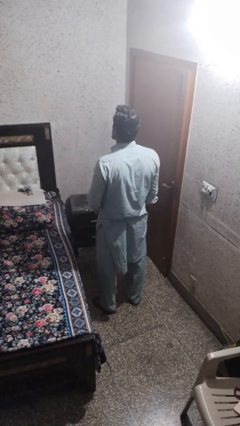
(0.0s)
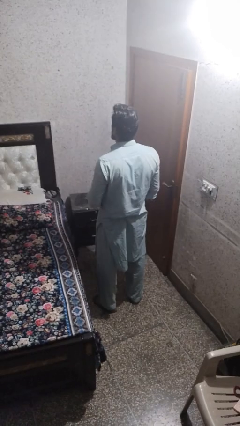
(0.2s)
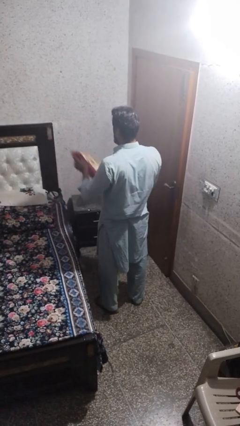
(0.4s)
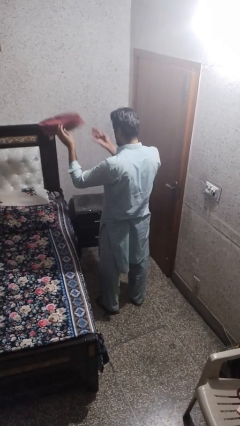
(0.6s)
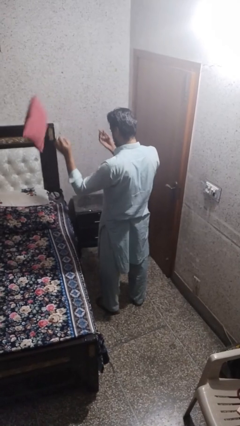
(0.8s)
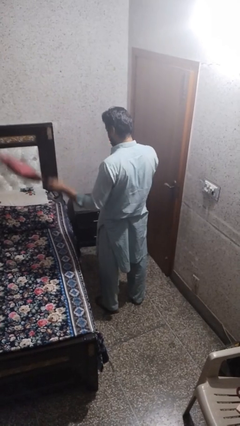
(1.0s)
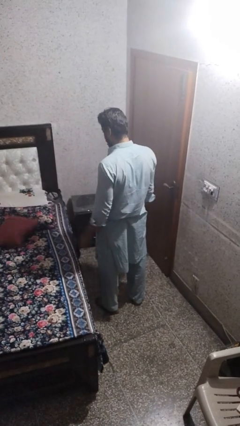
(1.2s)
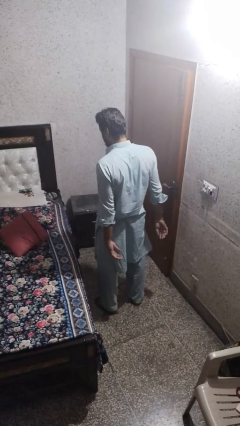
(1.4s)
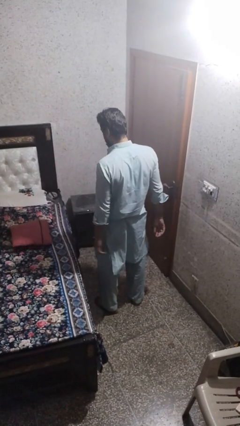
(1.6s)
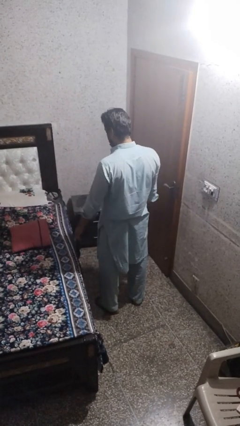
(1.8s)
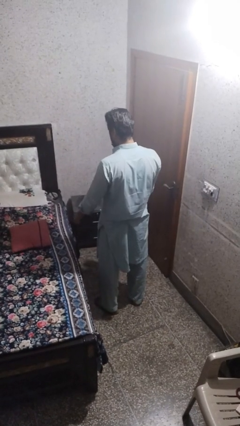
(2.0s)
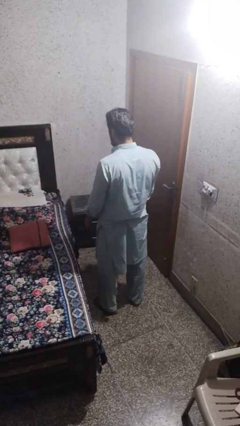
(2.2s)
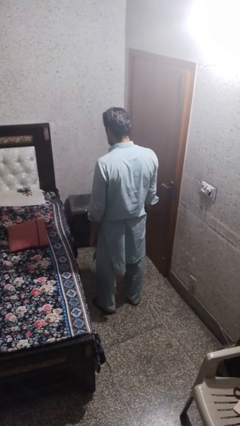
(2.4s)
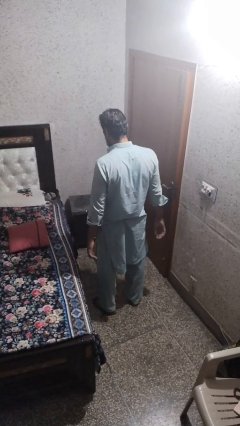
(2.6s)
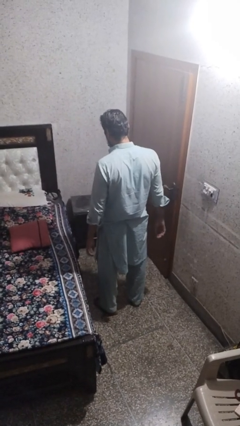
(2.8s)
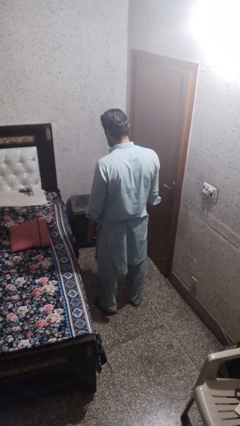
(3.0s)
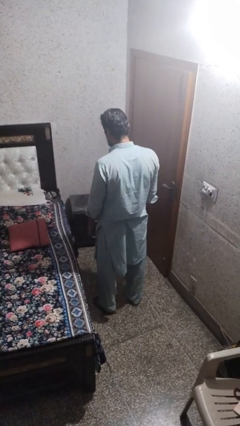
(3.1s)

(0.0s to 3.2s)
person throws object on bed

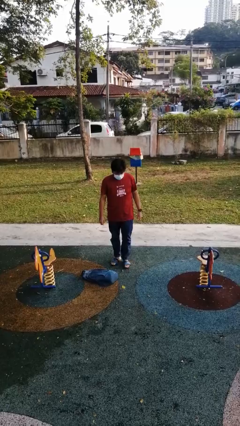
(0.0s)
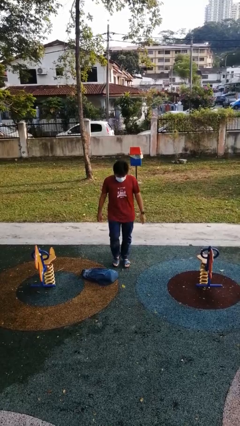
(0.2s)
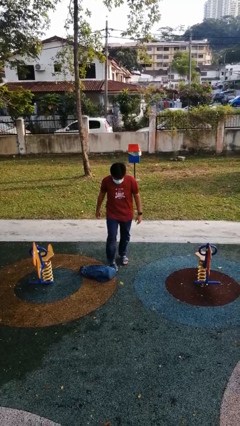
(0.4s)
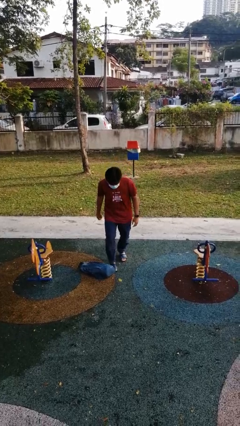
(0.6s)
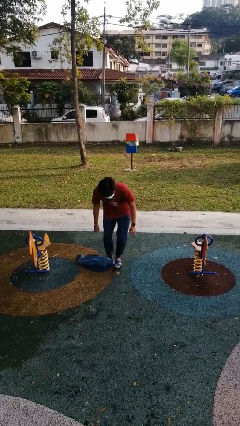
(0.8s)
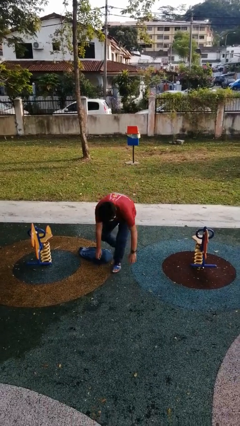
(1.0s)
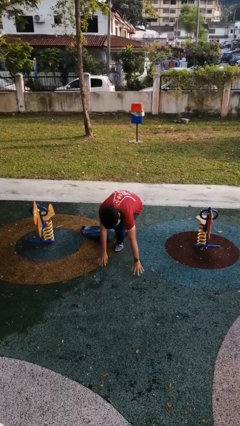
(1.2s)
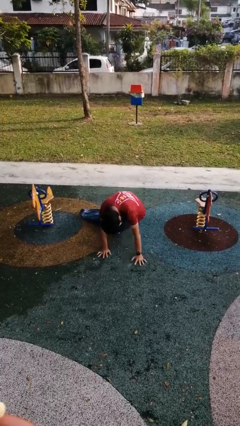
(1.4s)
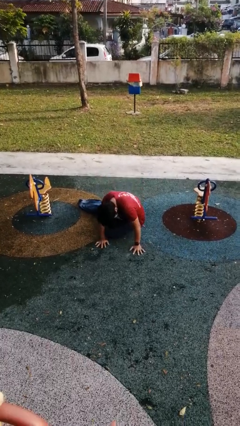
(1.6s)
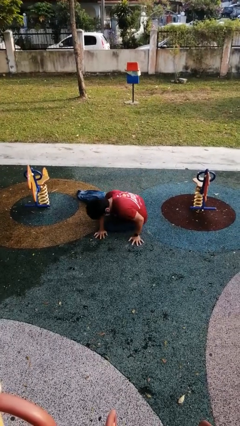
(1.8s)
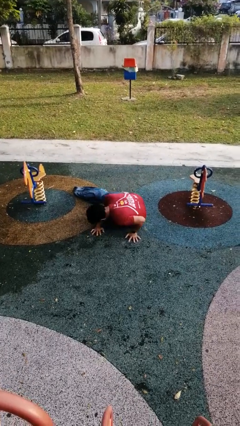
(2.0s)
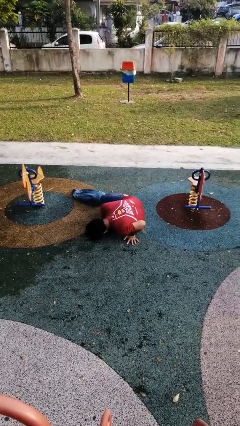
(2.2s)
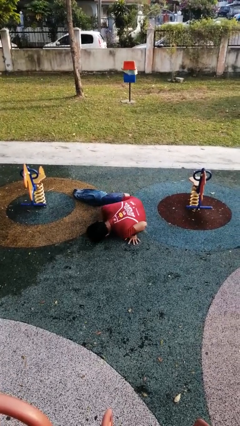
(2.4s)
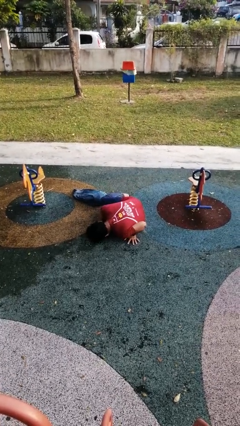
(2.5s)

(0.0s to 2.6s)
person trips on object on floor

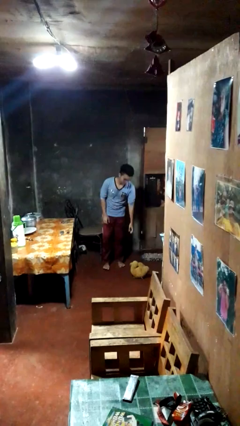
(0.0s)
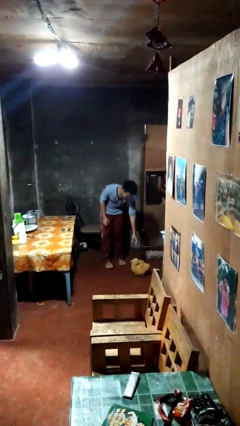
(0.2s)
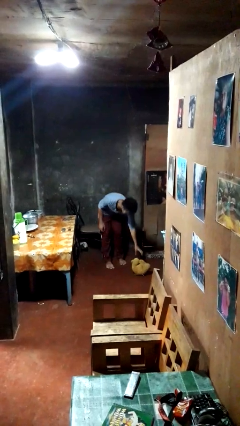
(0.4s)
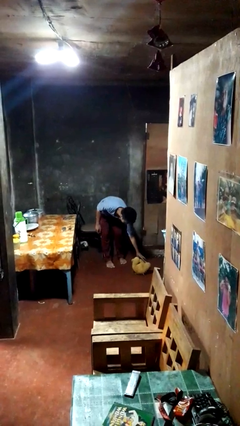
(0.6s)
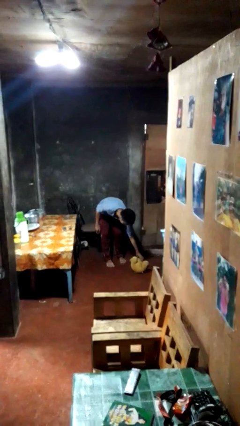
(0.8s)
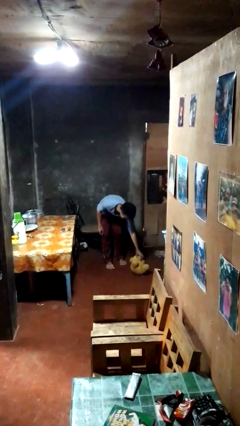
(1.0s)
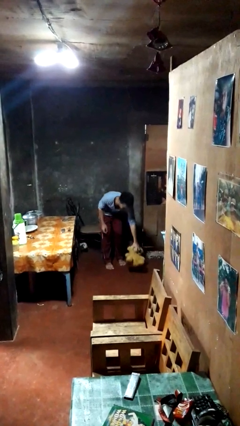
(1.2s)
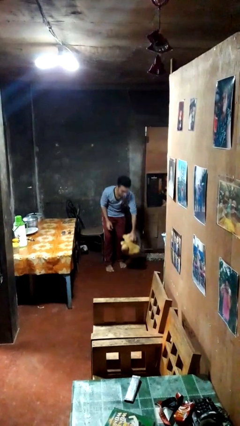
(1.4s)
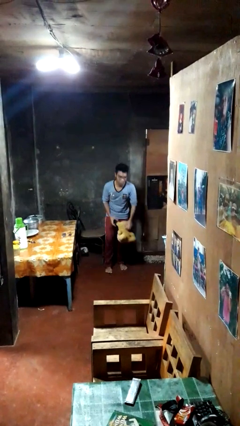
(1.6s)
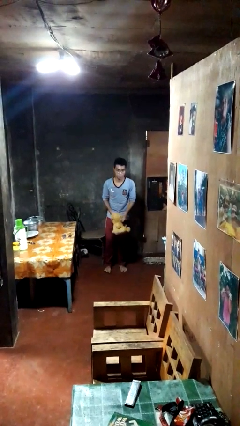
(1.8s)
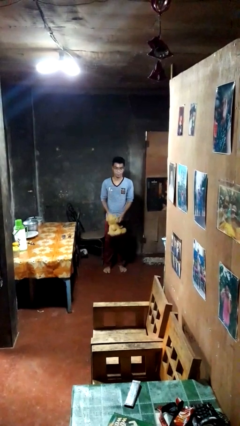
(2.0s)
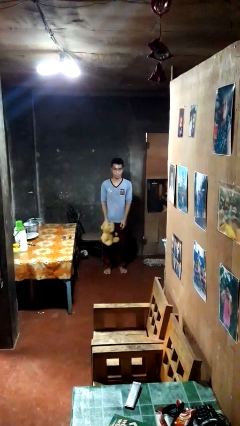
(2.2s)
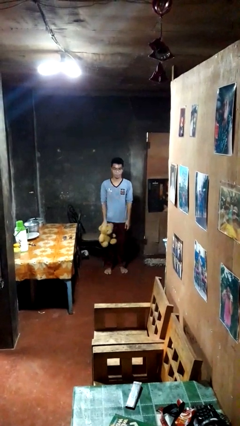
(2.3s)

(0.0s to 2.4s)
person picks up object from floor

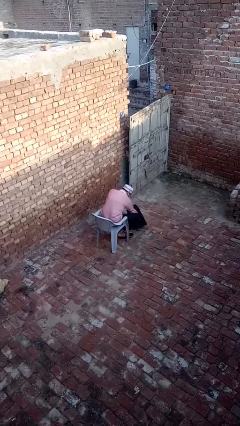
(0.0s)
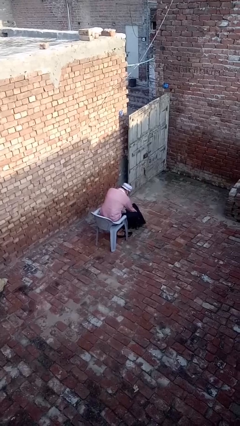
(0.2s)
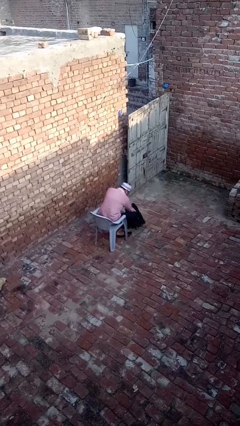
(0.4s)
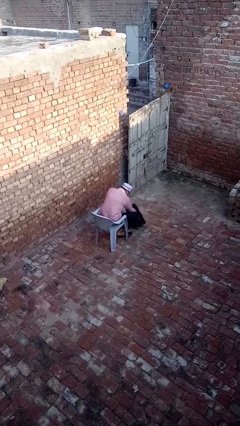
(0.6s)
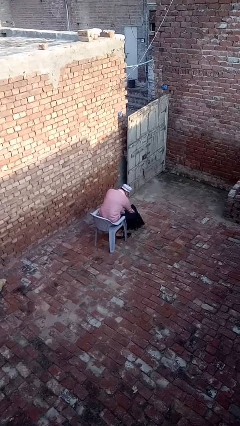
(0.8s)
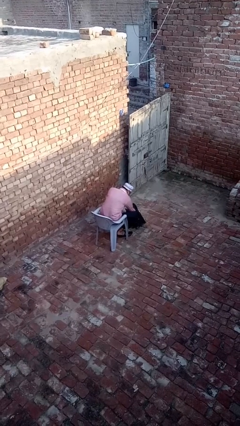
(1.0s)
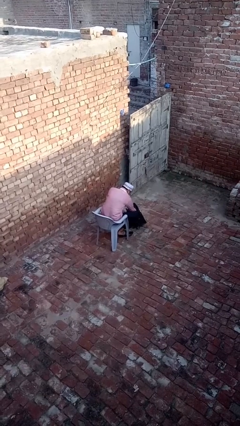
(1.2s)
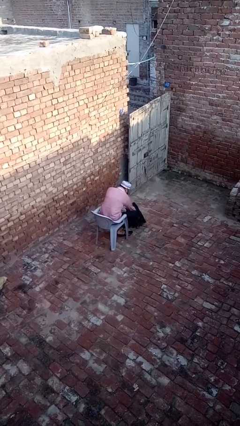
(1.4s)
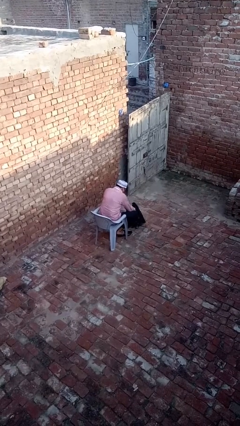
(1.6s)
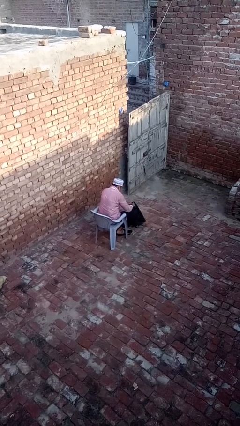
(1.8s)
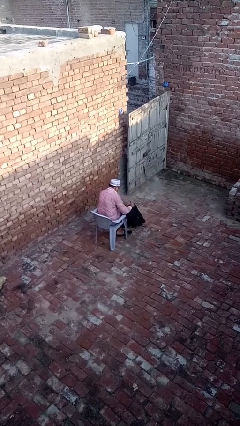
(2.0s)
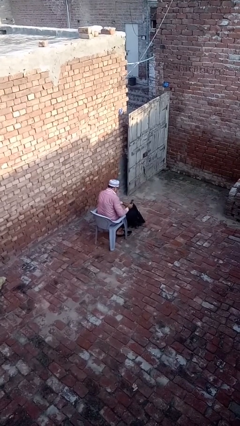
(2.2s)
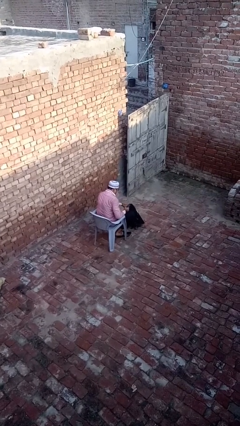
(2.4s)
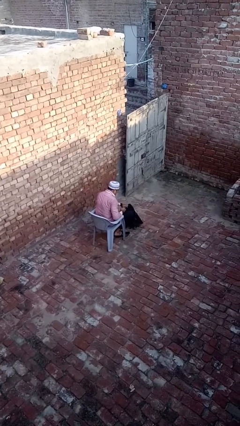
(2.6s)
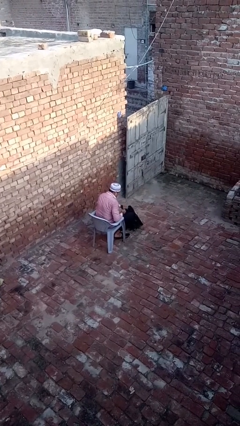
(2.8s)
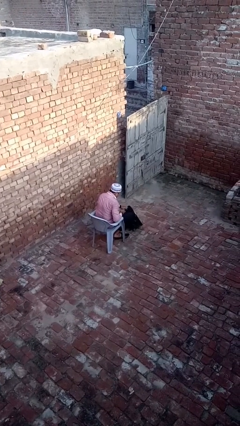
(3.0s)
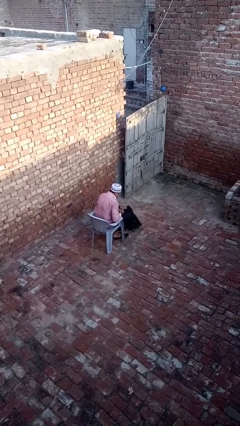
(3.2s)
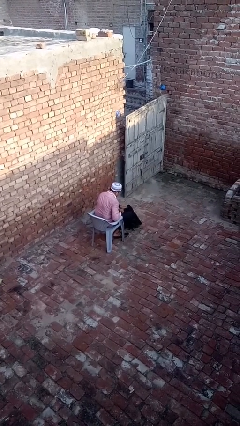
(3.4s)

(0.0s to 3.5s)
person takes object from backpack

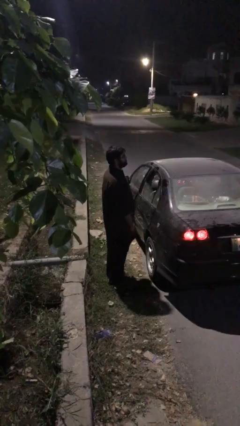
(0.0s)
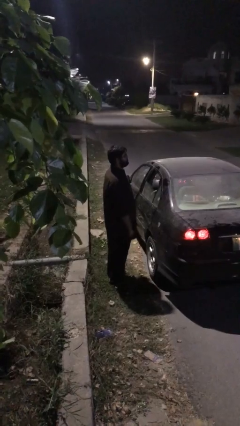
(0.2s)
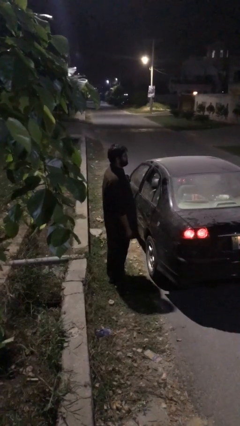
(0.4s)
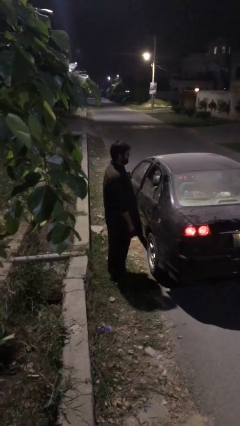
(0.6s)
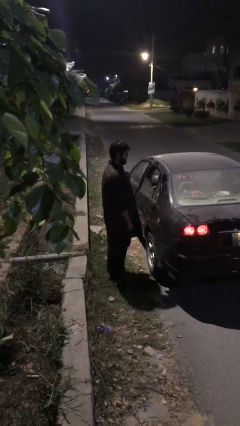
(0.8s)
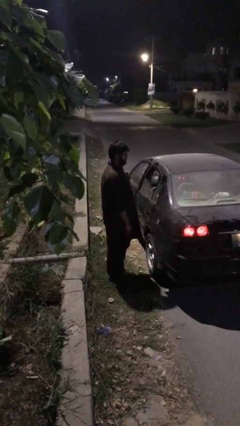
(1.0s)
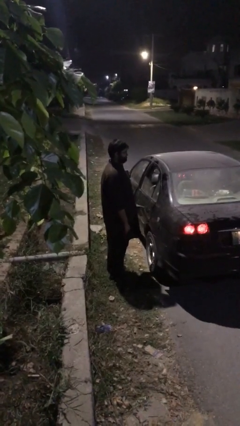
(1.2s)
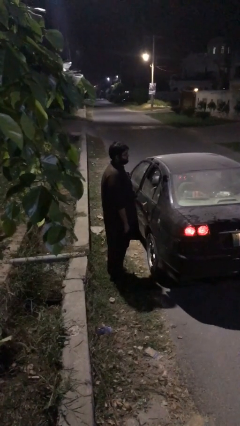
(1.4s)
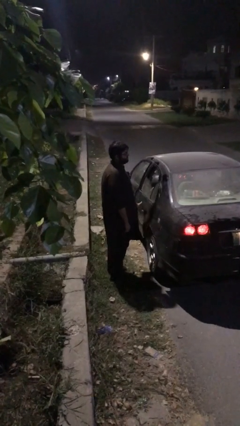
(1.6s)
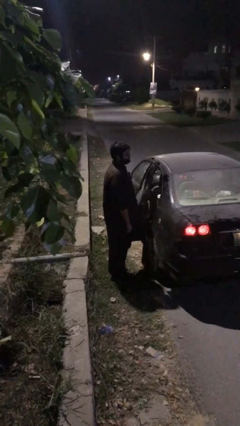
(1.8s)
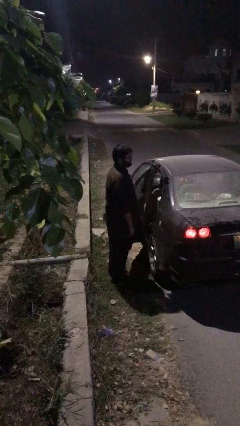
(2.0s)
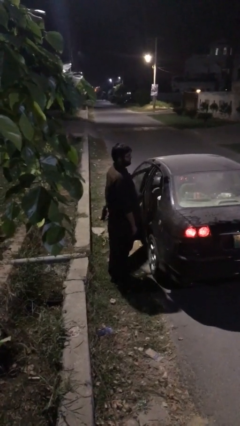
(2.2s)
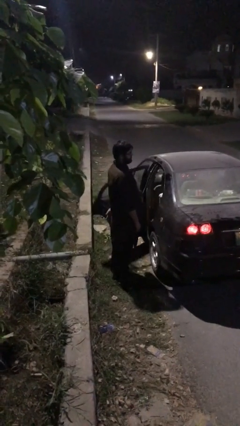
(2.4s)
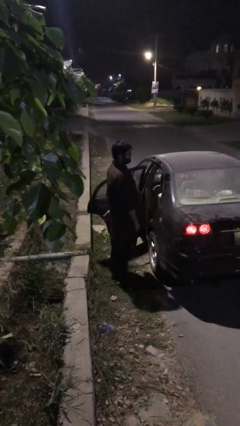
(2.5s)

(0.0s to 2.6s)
person opens car door

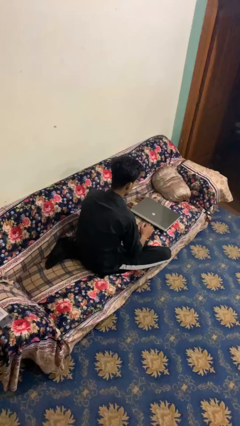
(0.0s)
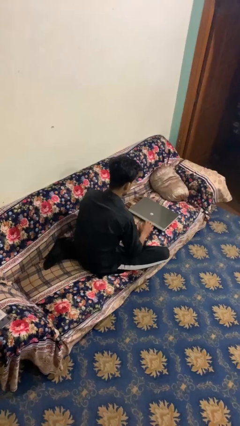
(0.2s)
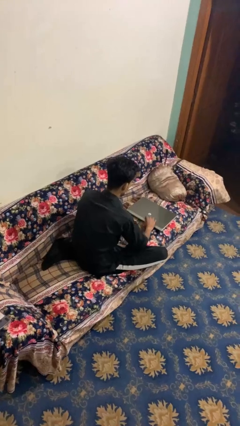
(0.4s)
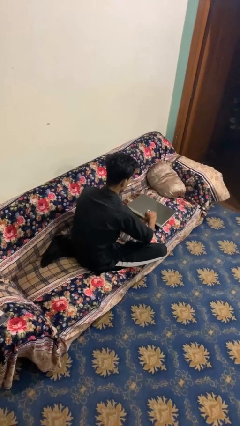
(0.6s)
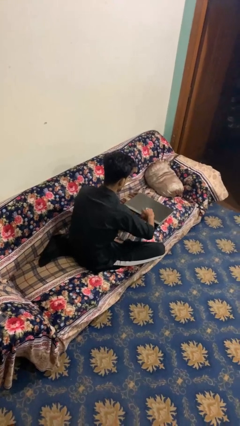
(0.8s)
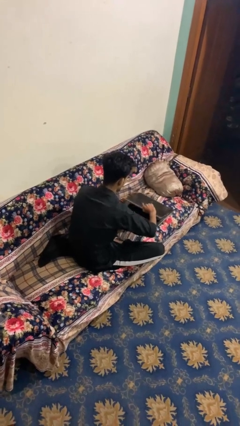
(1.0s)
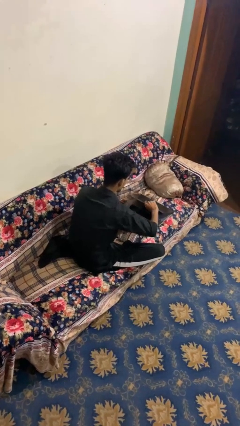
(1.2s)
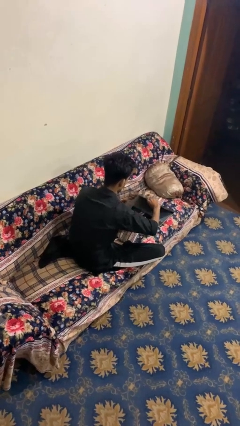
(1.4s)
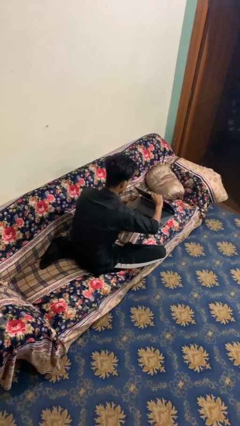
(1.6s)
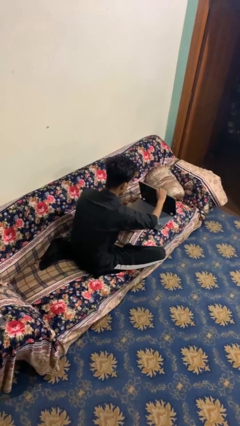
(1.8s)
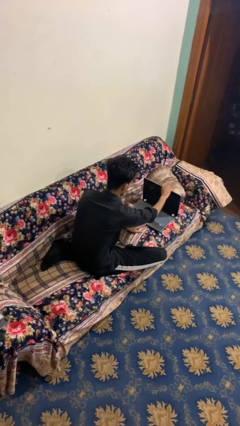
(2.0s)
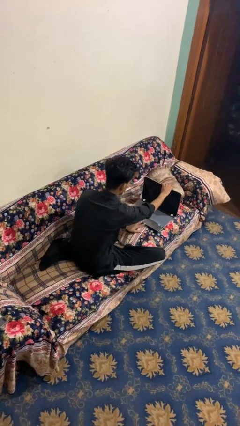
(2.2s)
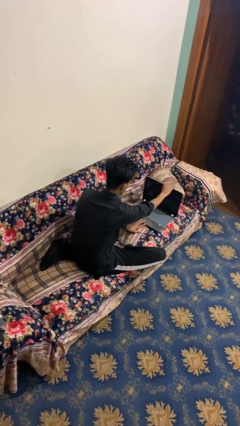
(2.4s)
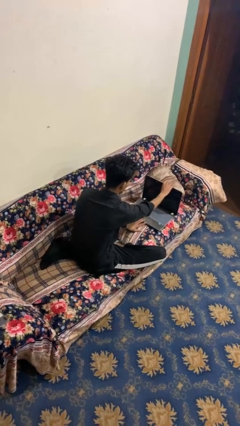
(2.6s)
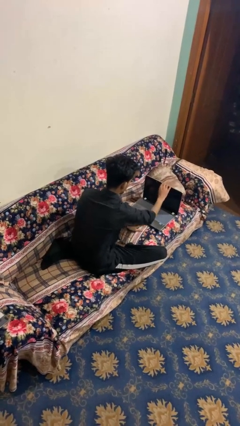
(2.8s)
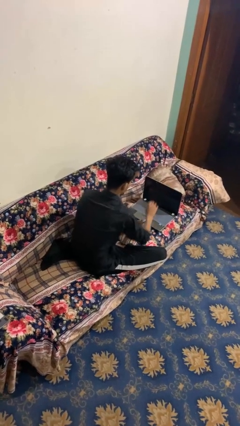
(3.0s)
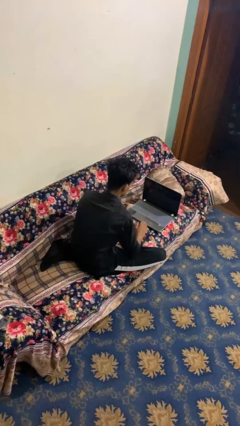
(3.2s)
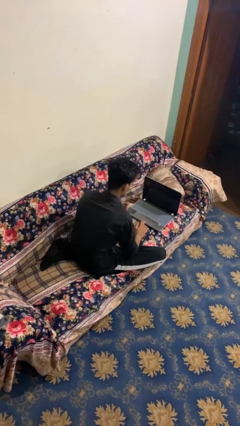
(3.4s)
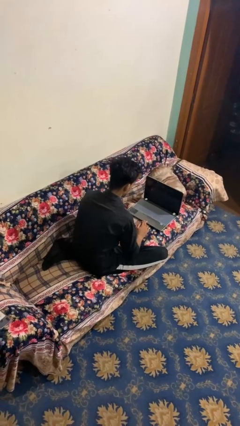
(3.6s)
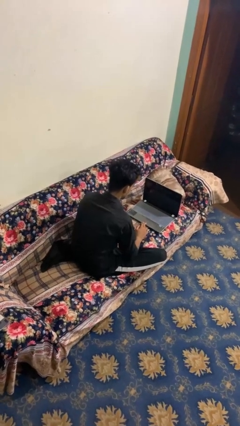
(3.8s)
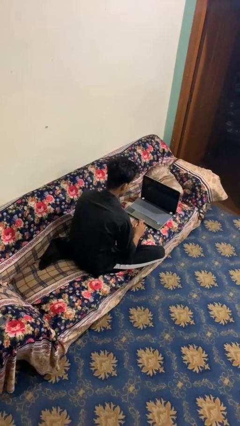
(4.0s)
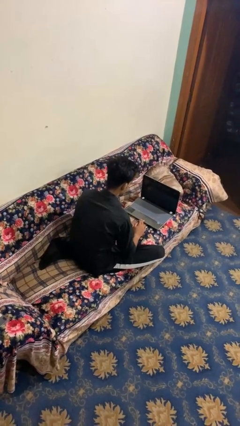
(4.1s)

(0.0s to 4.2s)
person opens laptop
